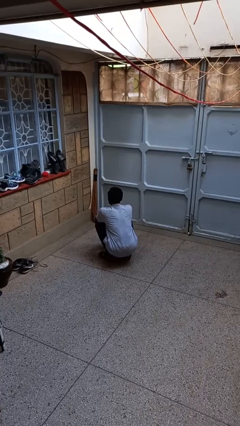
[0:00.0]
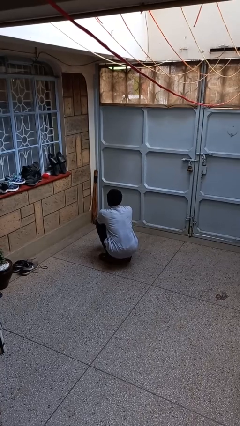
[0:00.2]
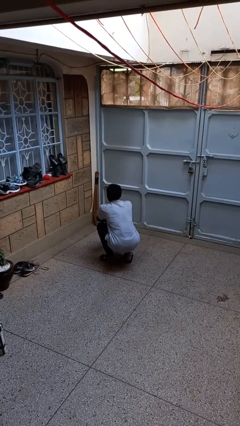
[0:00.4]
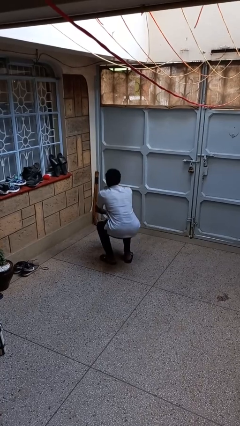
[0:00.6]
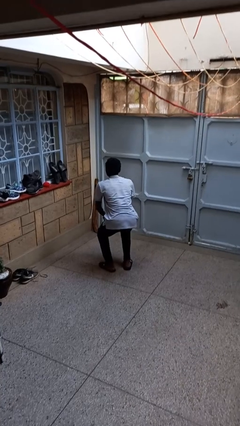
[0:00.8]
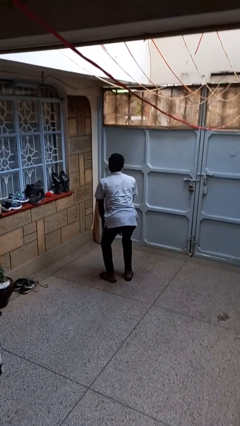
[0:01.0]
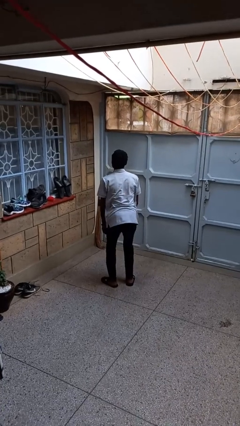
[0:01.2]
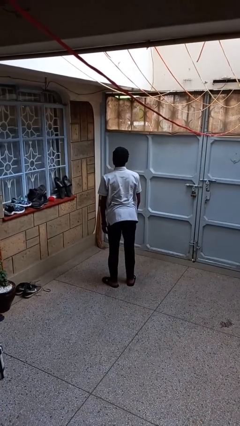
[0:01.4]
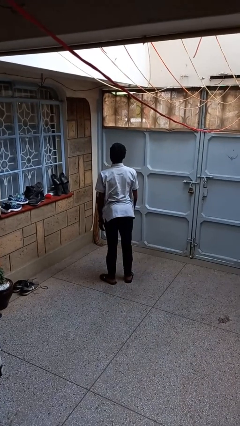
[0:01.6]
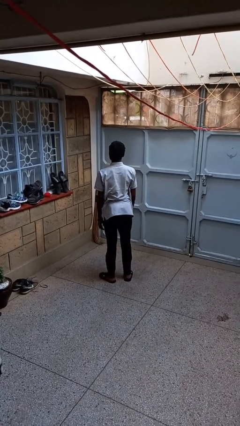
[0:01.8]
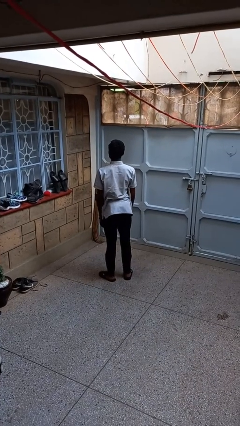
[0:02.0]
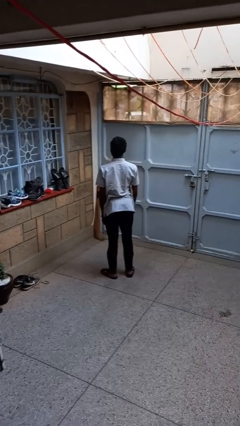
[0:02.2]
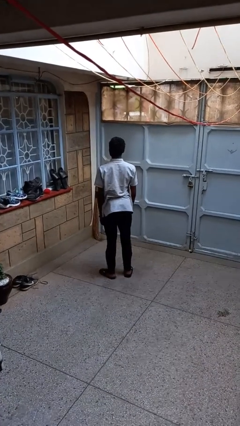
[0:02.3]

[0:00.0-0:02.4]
person stands up

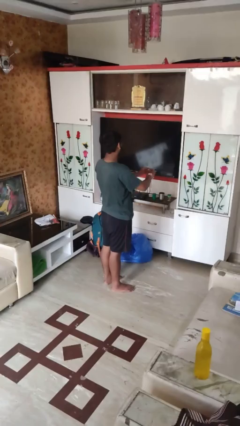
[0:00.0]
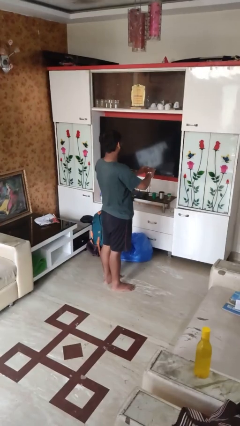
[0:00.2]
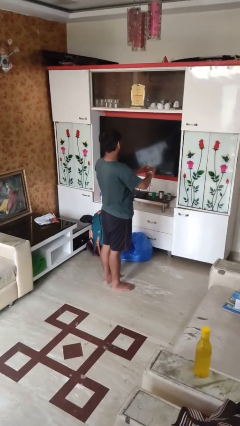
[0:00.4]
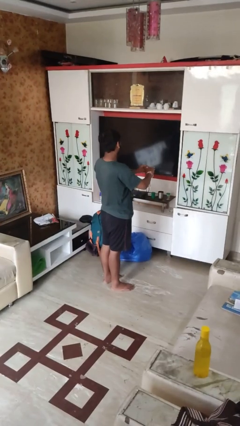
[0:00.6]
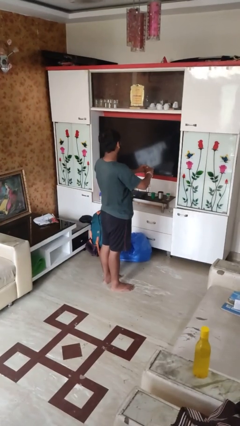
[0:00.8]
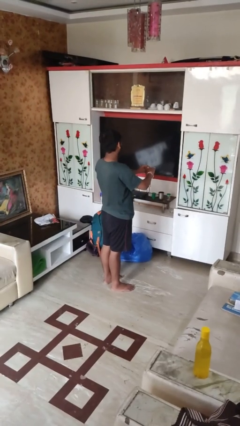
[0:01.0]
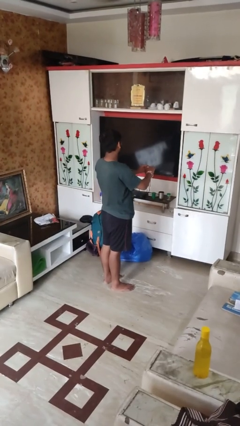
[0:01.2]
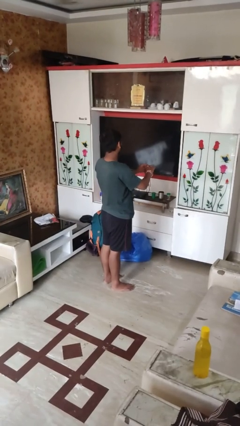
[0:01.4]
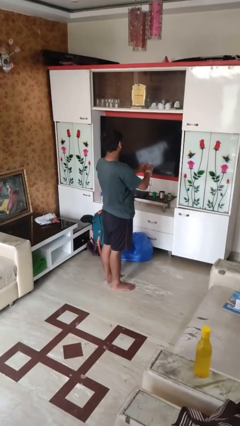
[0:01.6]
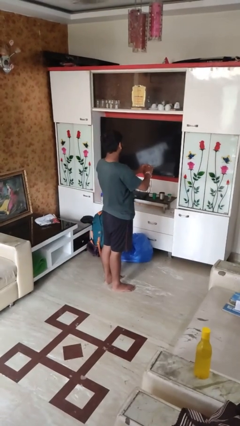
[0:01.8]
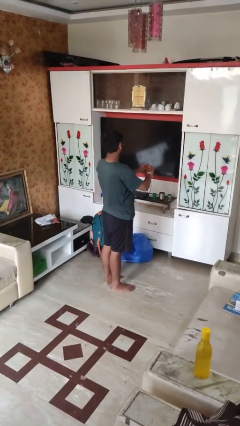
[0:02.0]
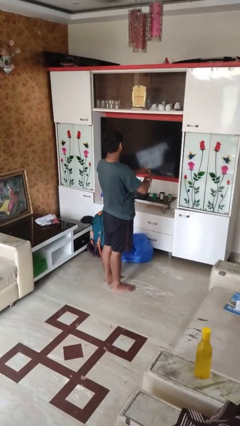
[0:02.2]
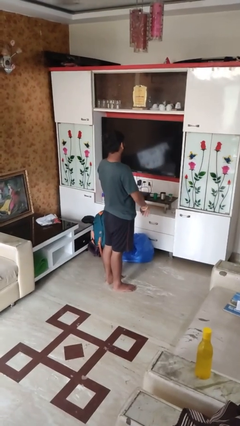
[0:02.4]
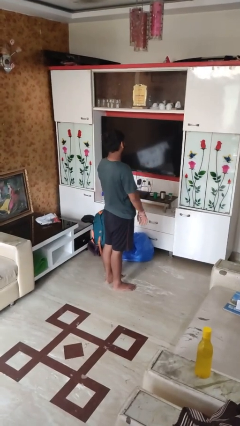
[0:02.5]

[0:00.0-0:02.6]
person files fingernails

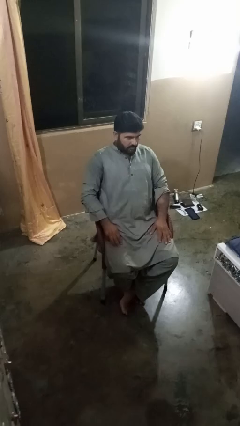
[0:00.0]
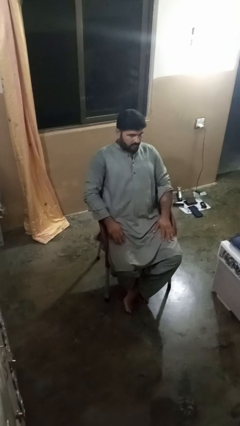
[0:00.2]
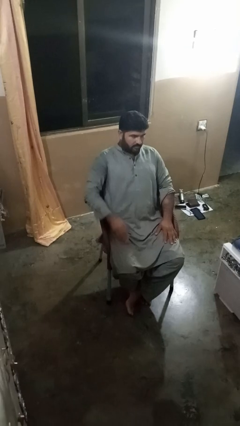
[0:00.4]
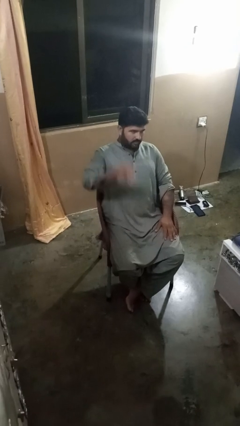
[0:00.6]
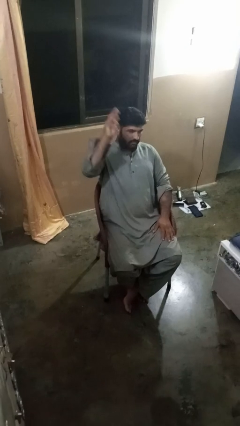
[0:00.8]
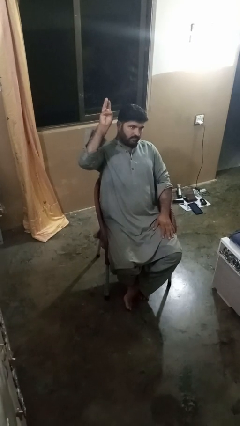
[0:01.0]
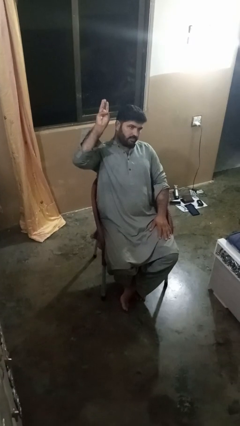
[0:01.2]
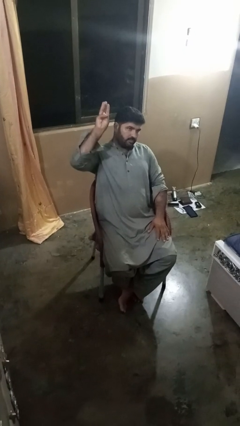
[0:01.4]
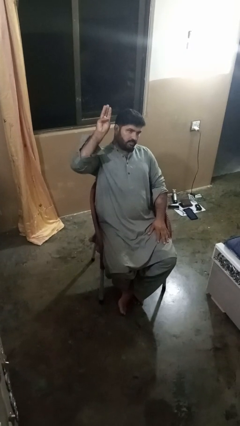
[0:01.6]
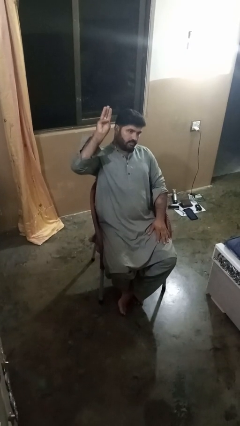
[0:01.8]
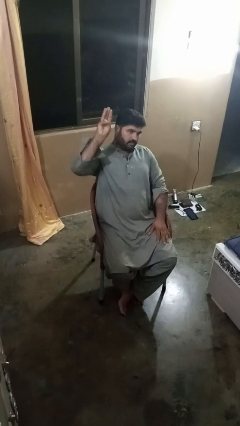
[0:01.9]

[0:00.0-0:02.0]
person gestures number three

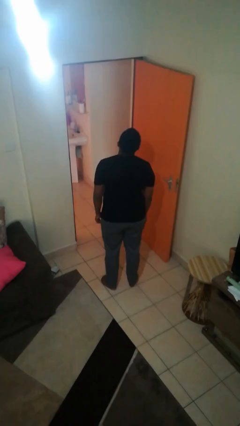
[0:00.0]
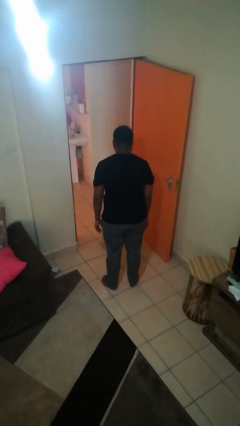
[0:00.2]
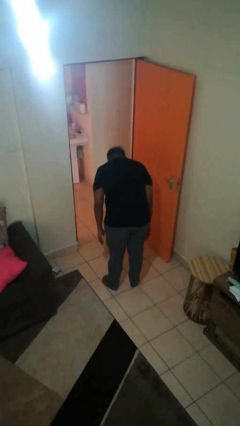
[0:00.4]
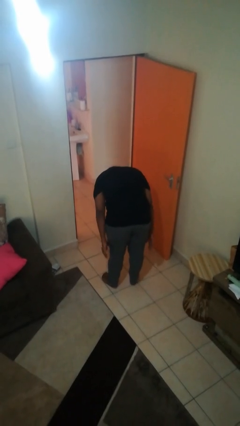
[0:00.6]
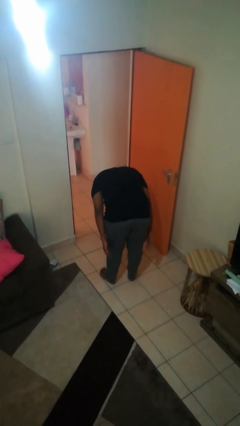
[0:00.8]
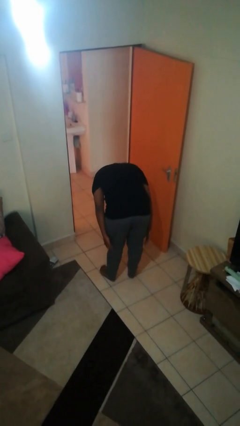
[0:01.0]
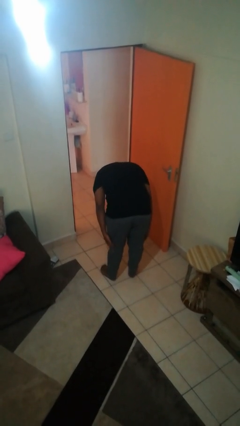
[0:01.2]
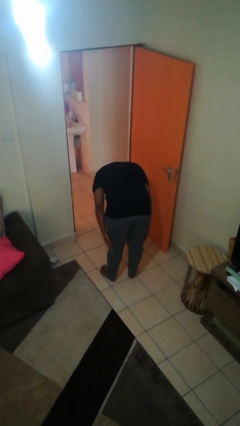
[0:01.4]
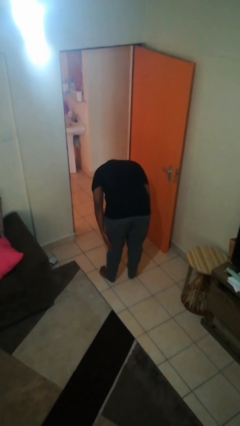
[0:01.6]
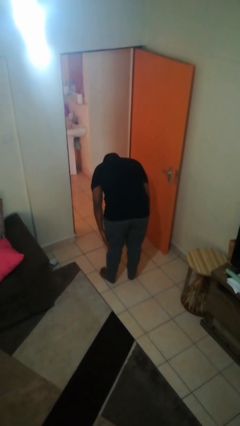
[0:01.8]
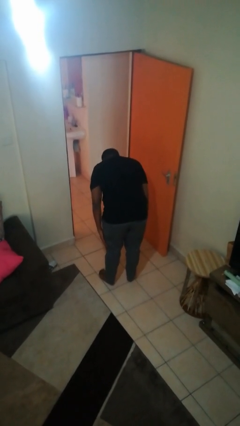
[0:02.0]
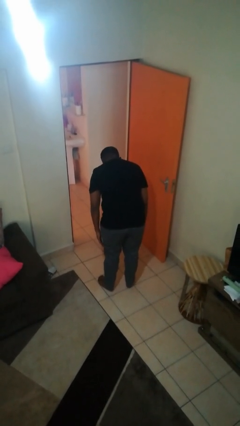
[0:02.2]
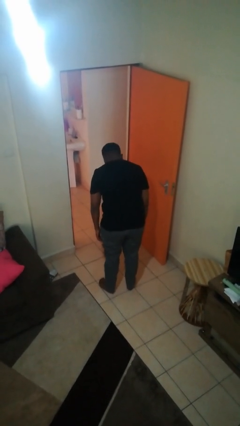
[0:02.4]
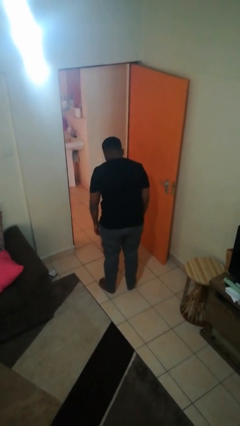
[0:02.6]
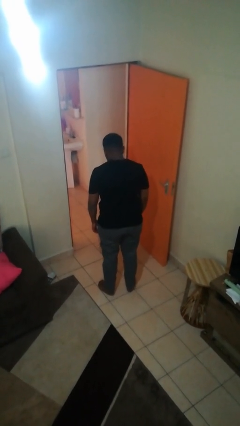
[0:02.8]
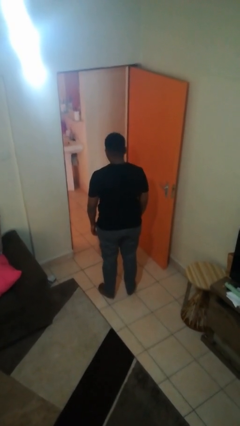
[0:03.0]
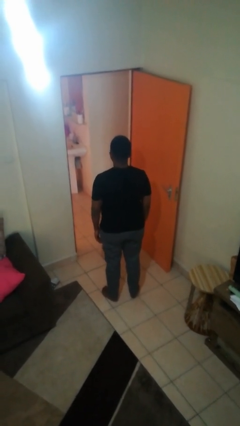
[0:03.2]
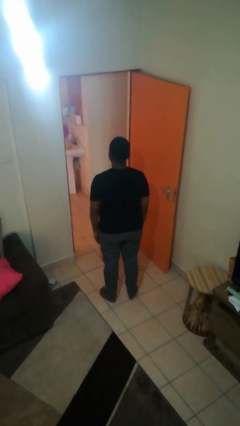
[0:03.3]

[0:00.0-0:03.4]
person bows

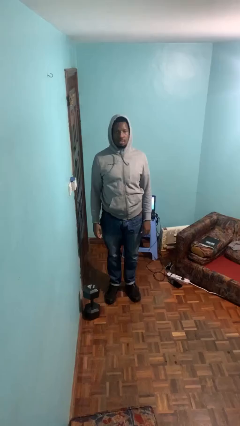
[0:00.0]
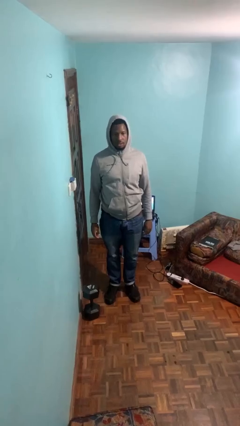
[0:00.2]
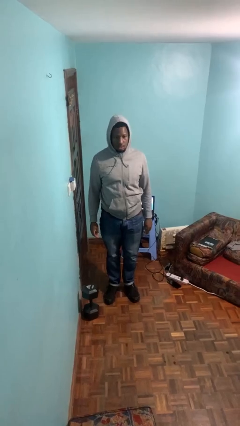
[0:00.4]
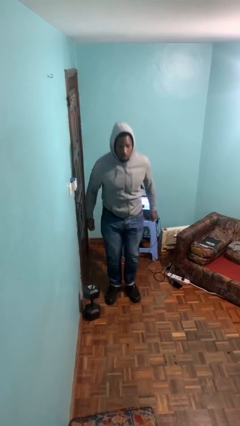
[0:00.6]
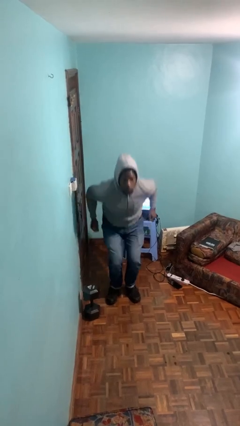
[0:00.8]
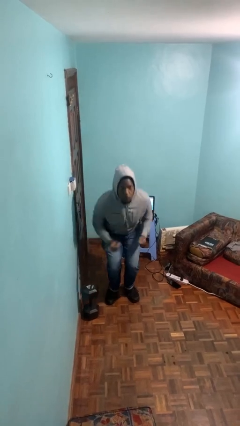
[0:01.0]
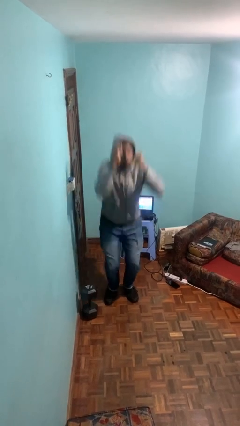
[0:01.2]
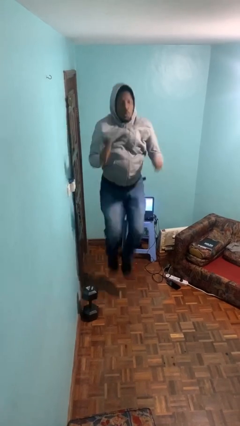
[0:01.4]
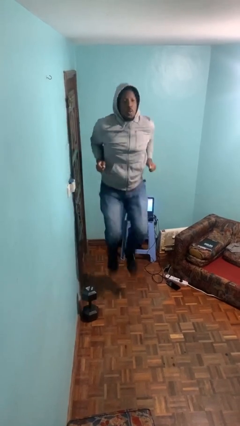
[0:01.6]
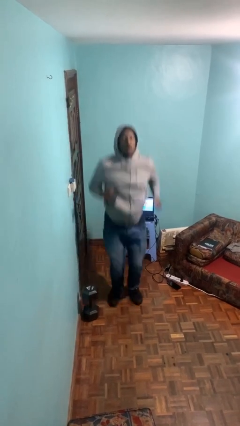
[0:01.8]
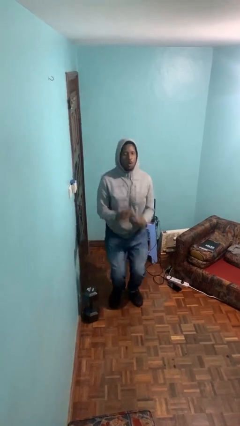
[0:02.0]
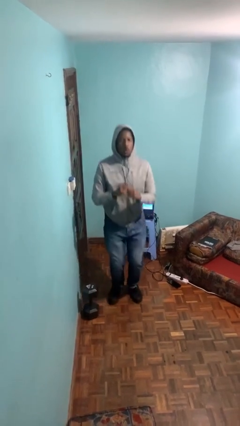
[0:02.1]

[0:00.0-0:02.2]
person jumps

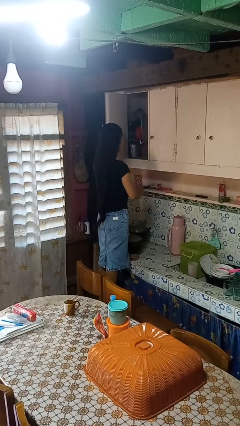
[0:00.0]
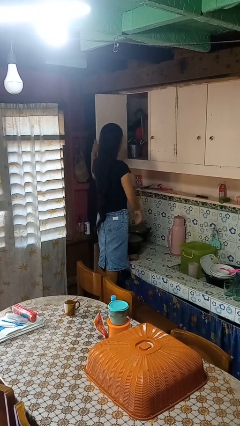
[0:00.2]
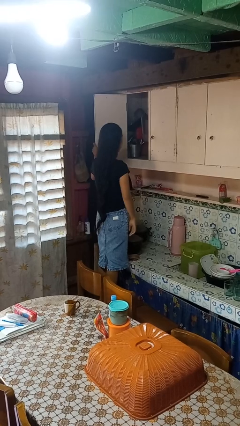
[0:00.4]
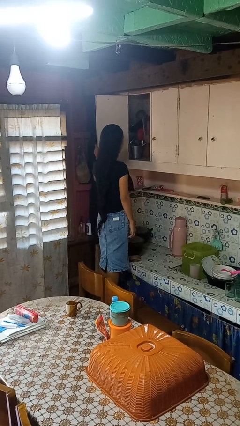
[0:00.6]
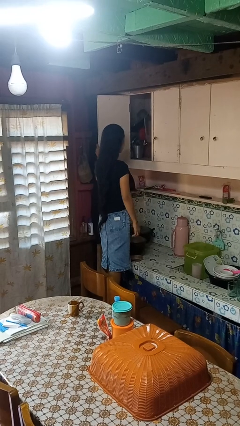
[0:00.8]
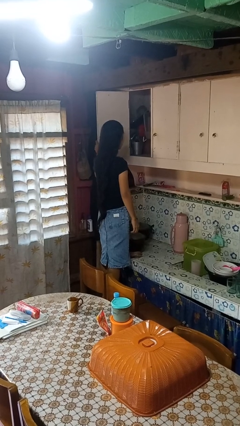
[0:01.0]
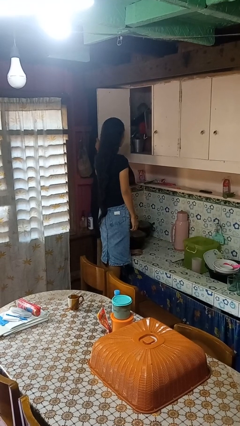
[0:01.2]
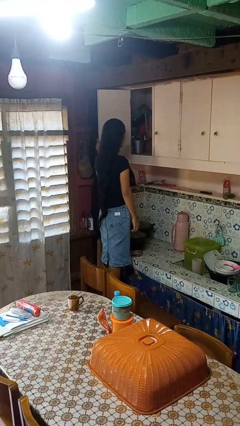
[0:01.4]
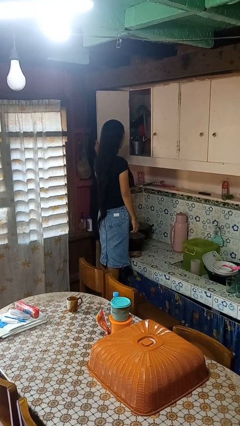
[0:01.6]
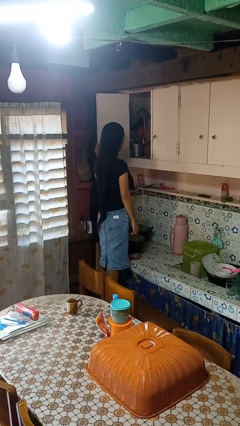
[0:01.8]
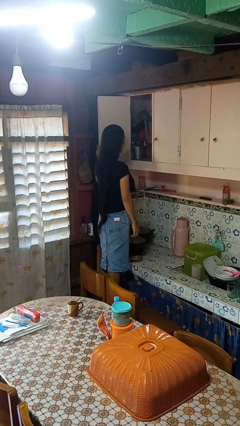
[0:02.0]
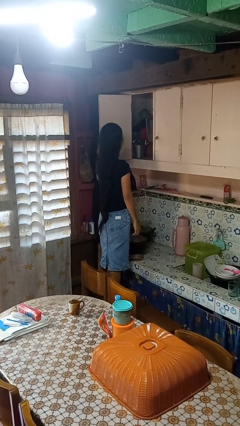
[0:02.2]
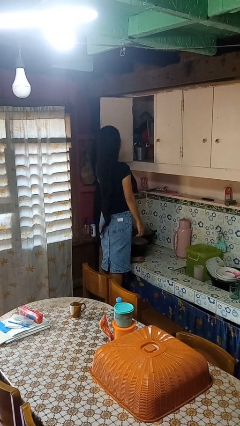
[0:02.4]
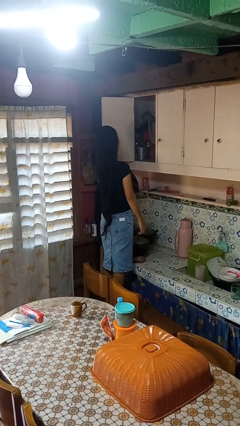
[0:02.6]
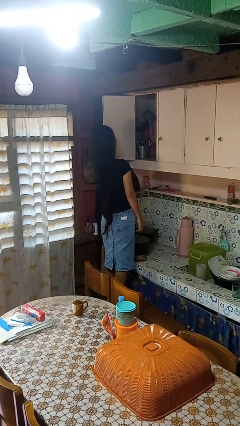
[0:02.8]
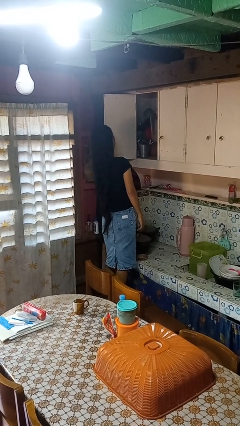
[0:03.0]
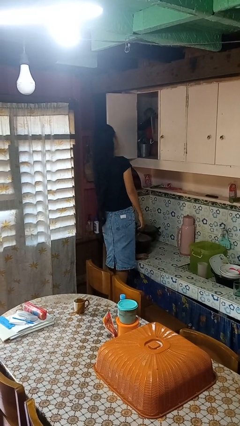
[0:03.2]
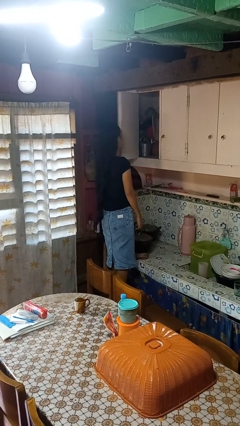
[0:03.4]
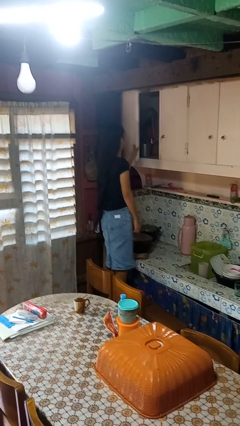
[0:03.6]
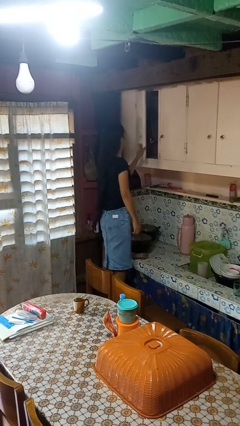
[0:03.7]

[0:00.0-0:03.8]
person opens cabinet

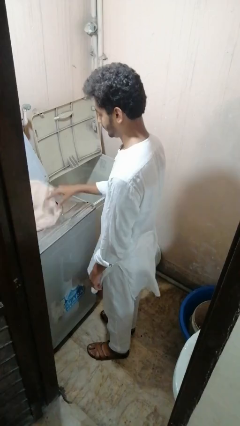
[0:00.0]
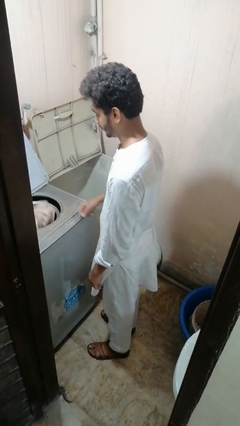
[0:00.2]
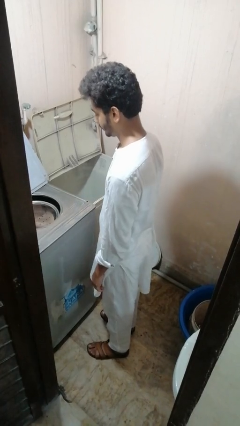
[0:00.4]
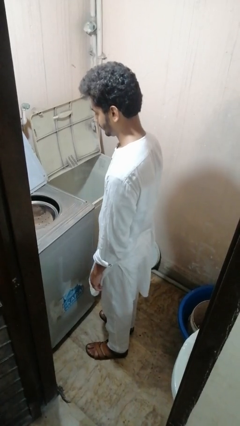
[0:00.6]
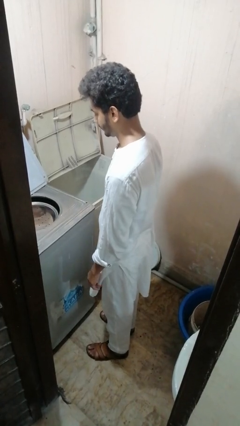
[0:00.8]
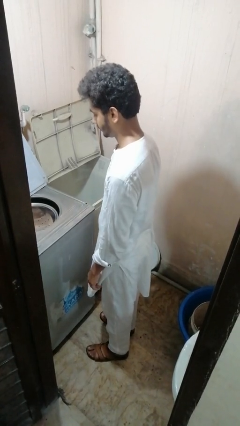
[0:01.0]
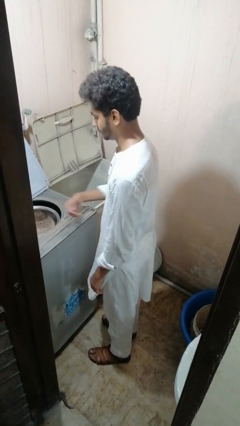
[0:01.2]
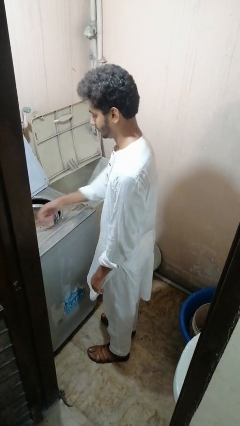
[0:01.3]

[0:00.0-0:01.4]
person loads dryer
